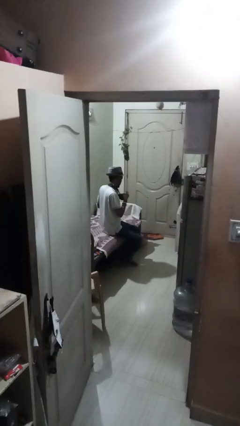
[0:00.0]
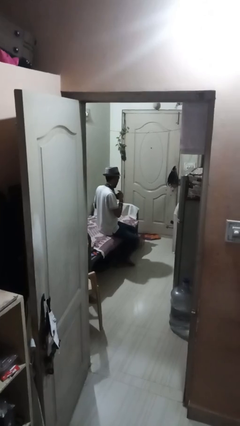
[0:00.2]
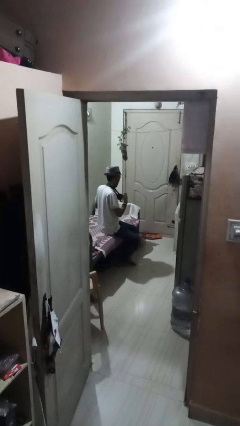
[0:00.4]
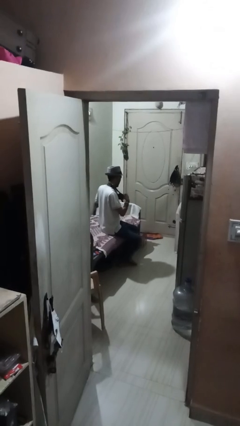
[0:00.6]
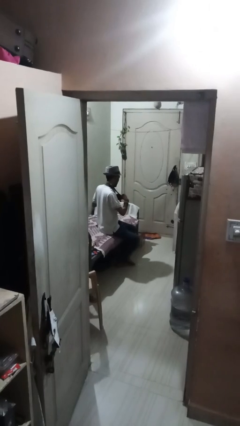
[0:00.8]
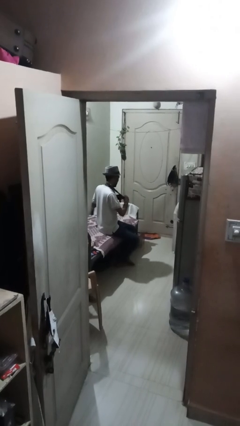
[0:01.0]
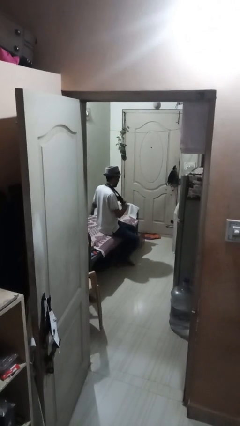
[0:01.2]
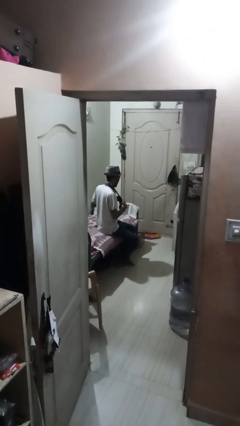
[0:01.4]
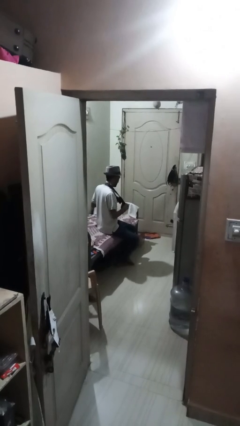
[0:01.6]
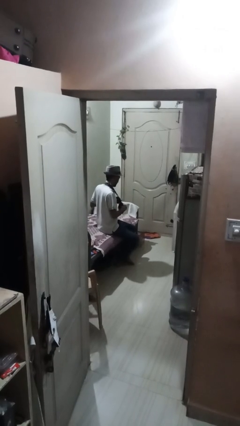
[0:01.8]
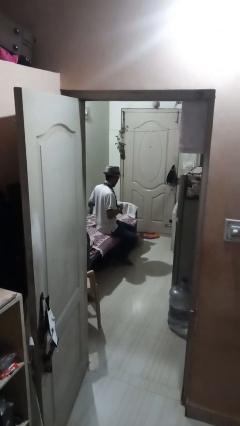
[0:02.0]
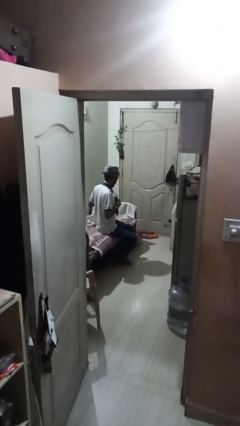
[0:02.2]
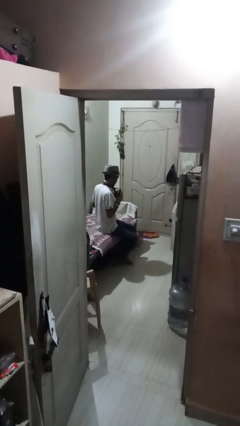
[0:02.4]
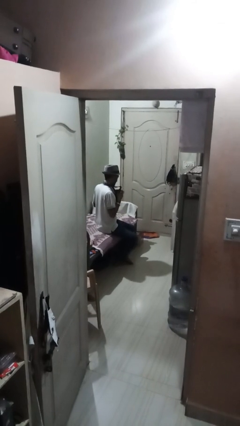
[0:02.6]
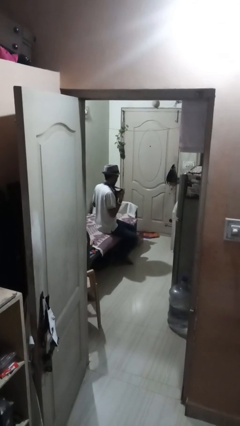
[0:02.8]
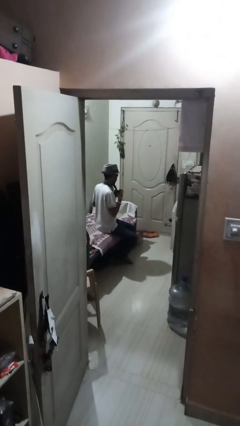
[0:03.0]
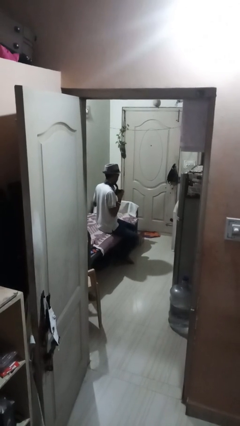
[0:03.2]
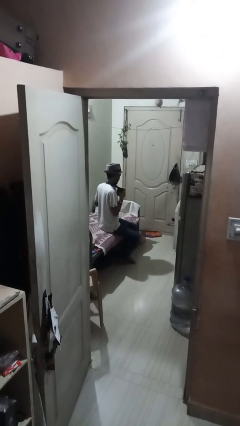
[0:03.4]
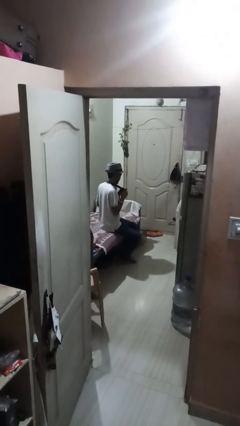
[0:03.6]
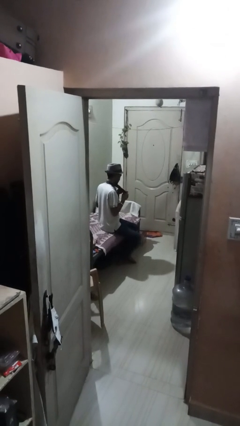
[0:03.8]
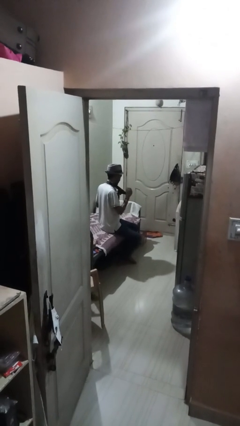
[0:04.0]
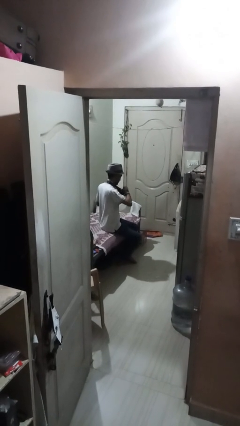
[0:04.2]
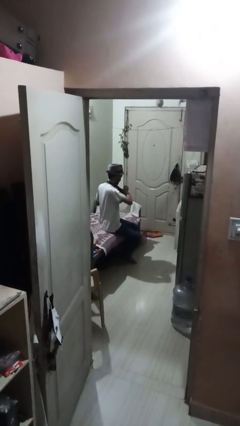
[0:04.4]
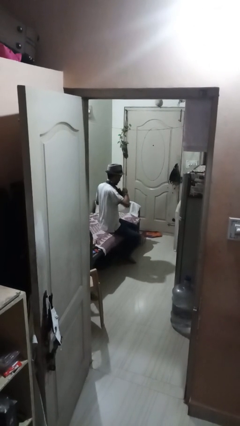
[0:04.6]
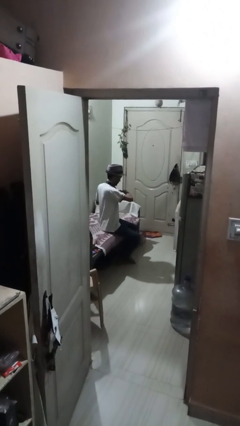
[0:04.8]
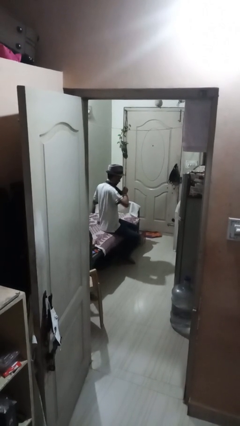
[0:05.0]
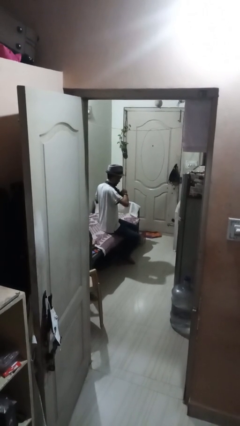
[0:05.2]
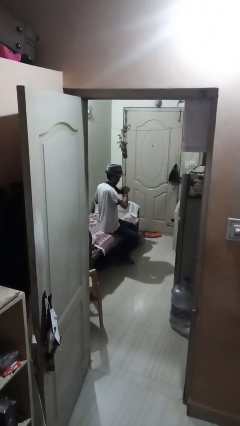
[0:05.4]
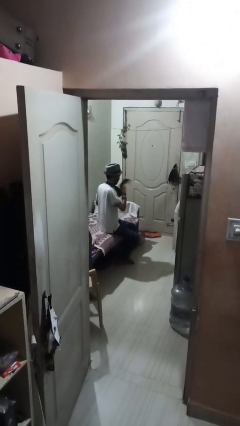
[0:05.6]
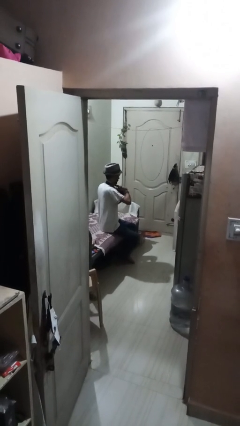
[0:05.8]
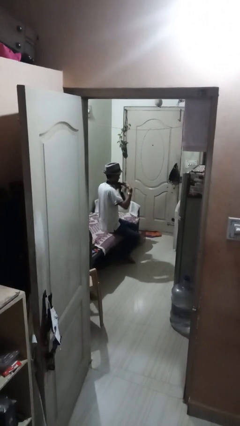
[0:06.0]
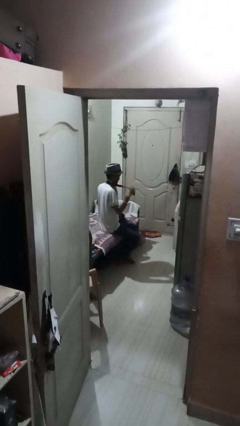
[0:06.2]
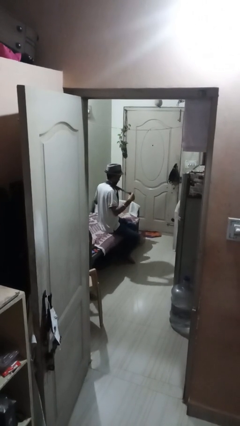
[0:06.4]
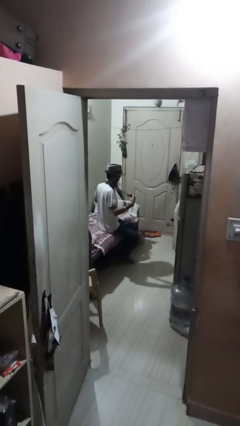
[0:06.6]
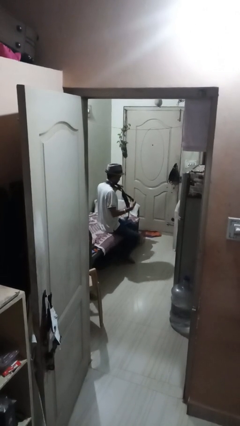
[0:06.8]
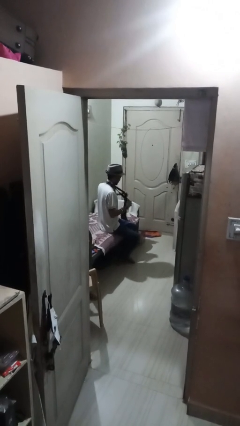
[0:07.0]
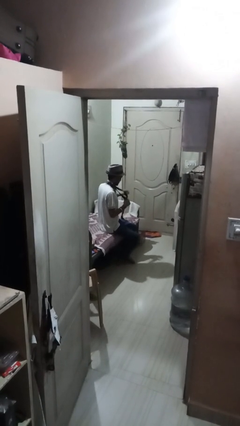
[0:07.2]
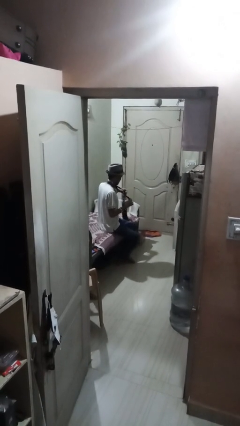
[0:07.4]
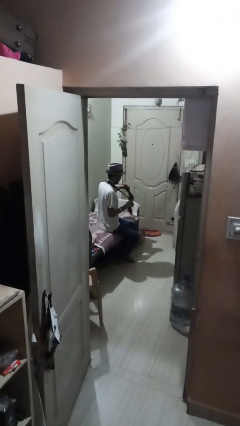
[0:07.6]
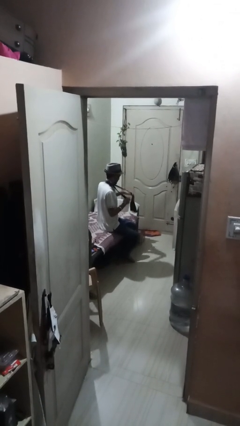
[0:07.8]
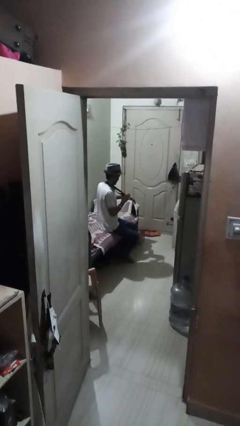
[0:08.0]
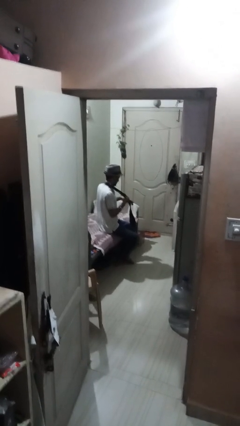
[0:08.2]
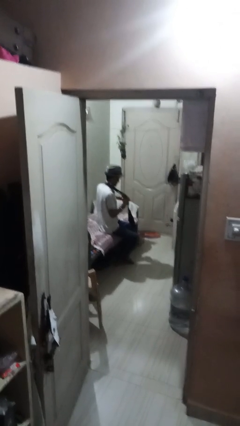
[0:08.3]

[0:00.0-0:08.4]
person takes off necktie

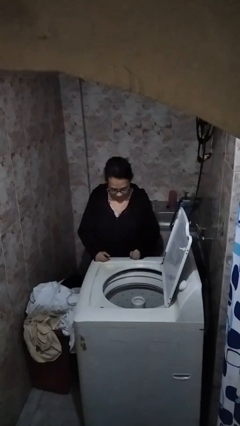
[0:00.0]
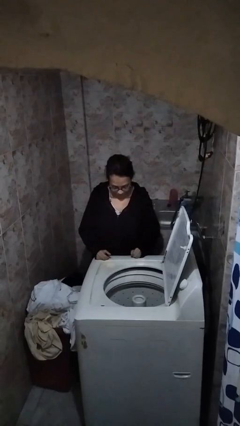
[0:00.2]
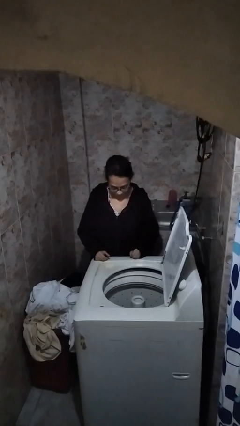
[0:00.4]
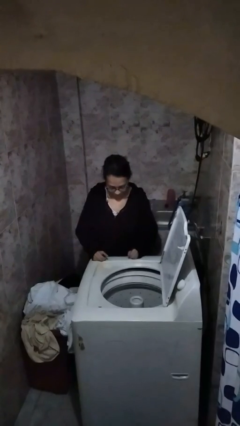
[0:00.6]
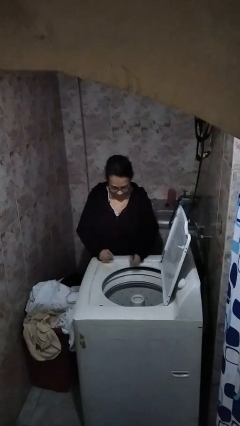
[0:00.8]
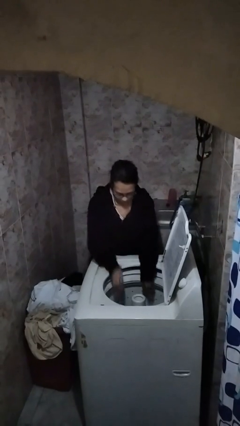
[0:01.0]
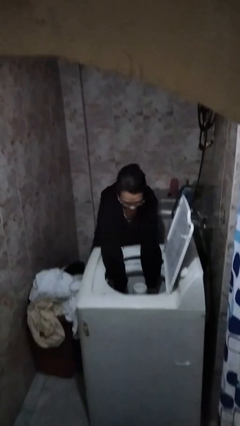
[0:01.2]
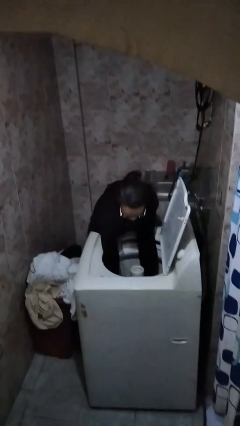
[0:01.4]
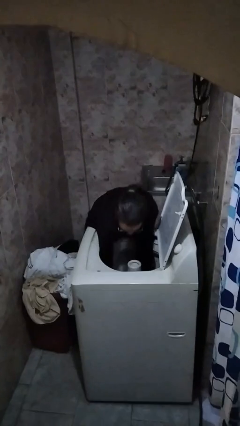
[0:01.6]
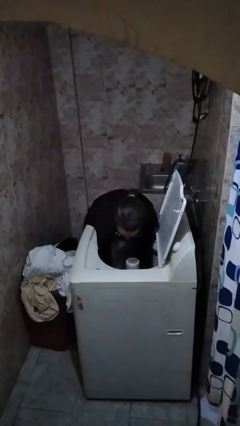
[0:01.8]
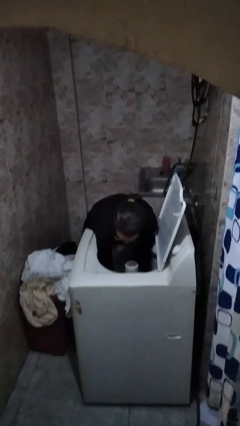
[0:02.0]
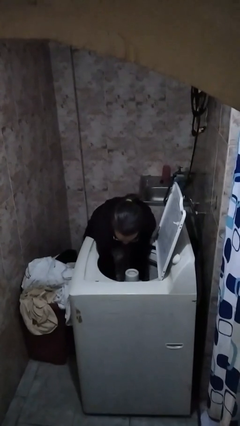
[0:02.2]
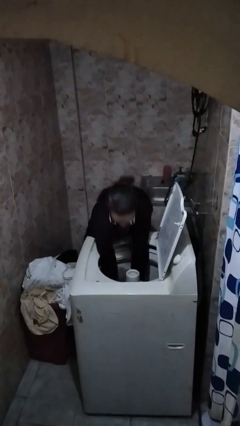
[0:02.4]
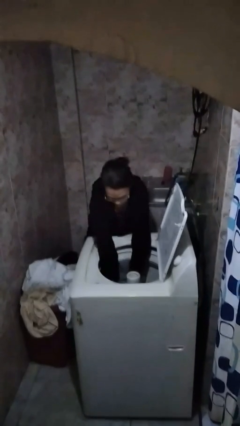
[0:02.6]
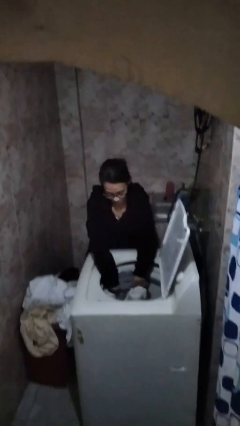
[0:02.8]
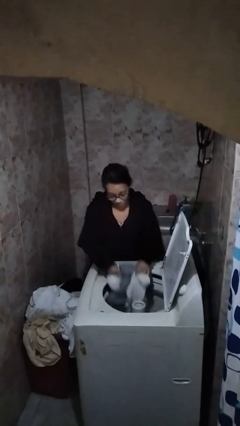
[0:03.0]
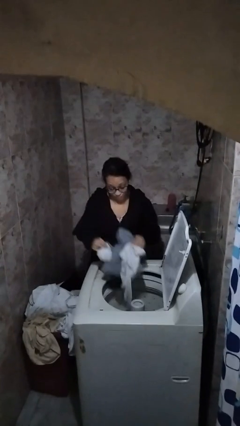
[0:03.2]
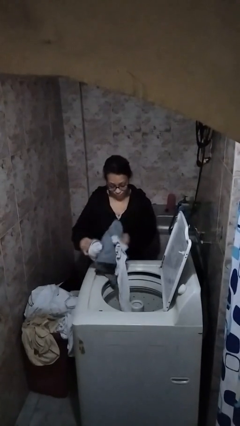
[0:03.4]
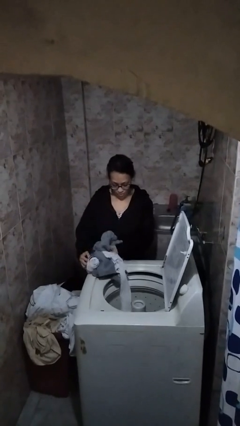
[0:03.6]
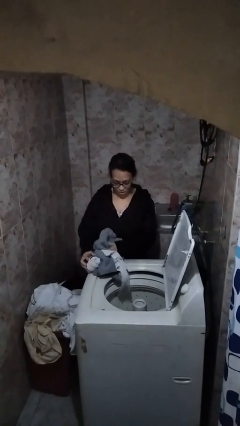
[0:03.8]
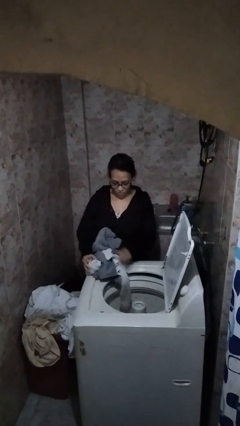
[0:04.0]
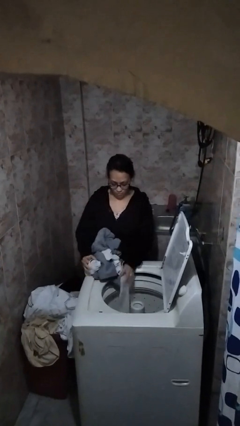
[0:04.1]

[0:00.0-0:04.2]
person unloads dryer

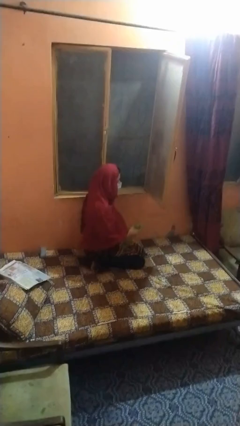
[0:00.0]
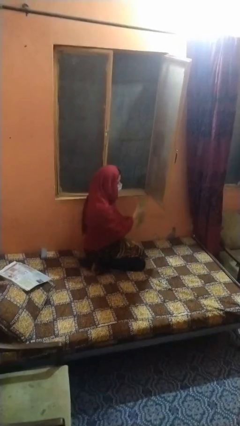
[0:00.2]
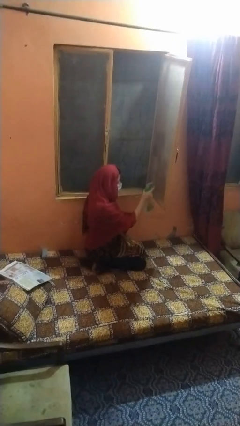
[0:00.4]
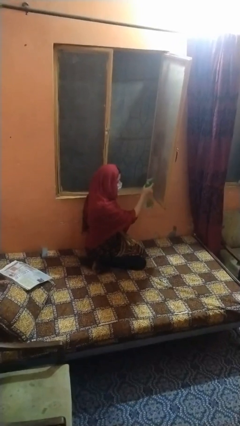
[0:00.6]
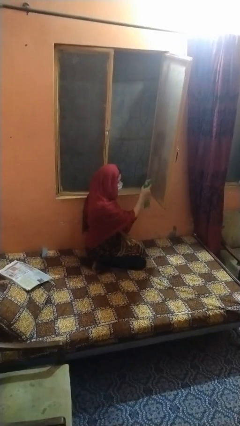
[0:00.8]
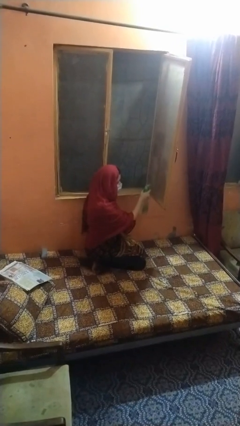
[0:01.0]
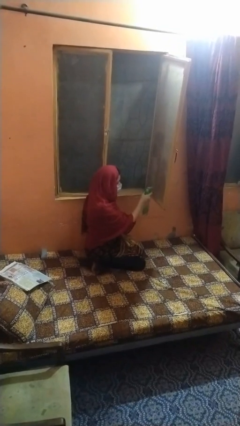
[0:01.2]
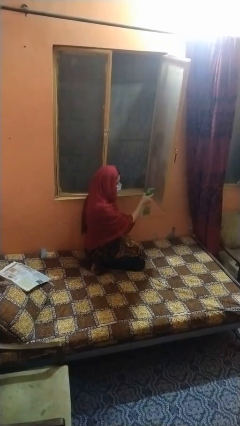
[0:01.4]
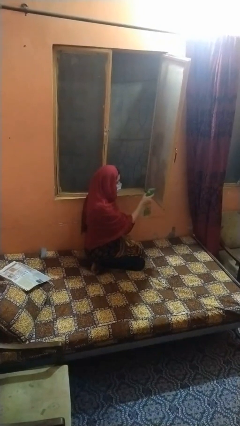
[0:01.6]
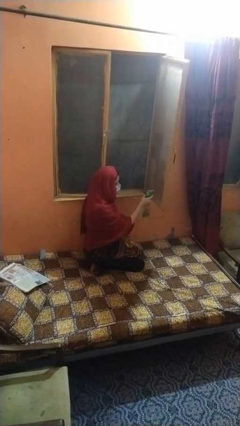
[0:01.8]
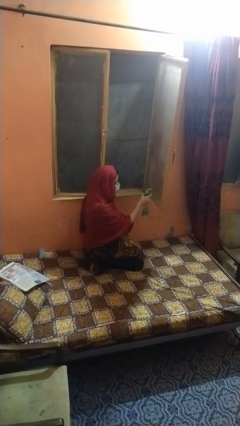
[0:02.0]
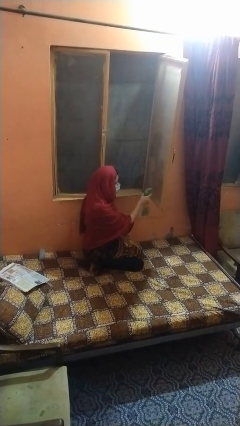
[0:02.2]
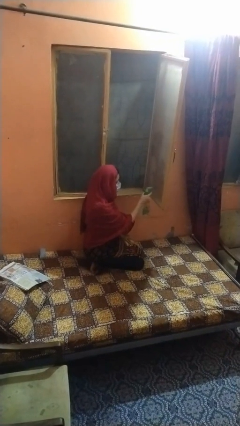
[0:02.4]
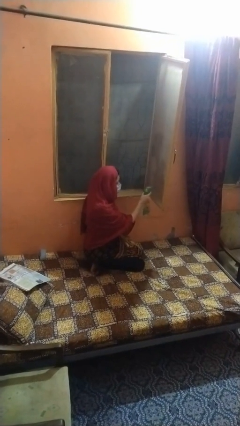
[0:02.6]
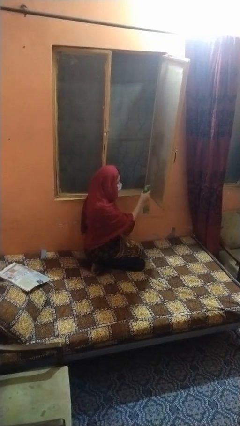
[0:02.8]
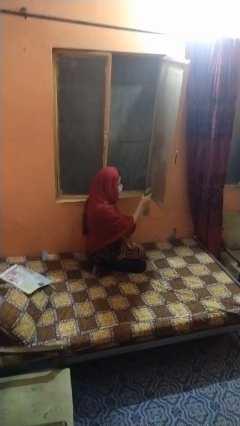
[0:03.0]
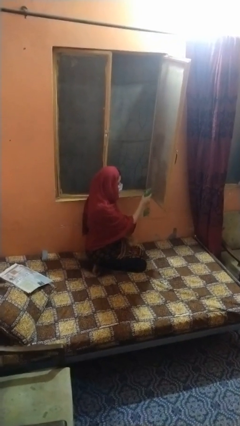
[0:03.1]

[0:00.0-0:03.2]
person sprays from bottle

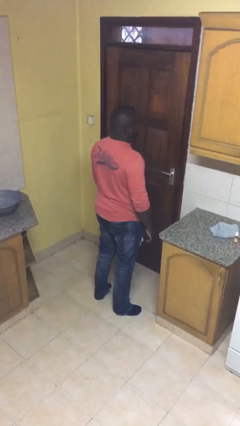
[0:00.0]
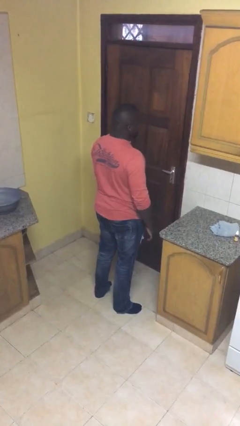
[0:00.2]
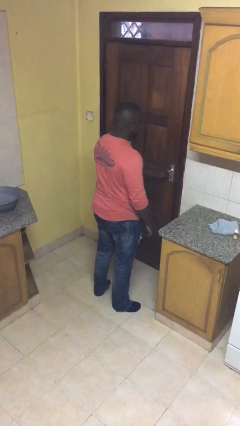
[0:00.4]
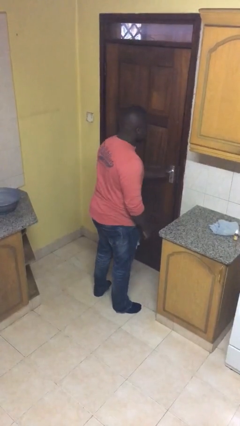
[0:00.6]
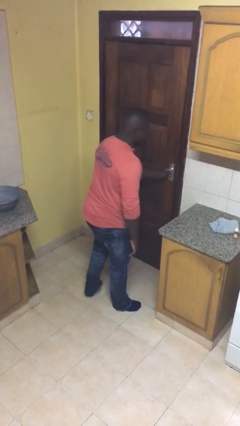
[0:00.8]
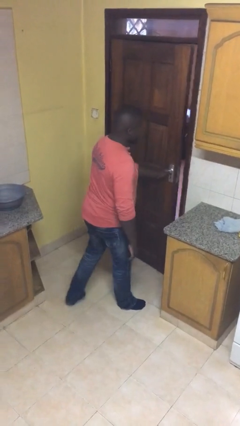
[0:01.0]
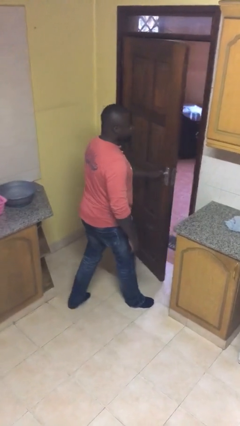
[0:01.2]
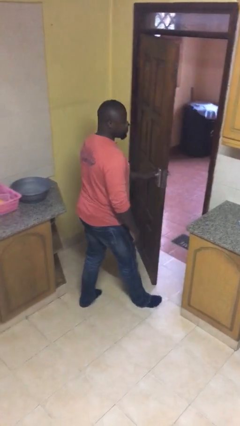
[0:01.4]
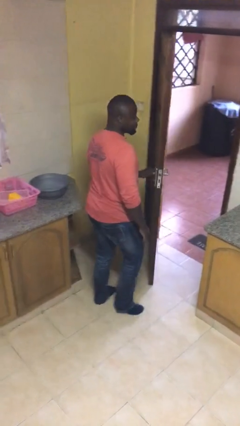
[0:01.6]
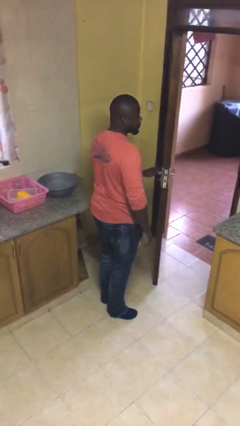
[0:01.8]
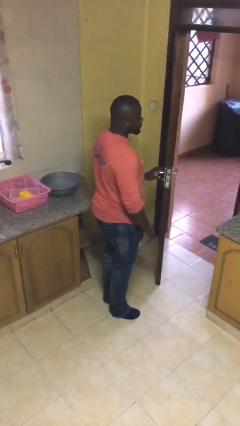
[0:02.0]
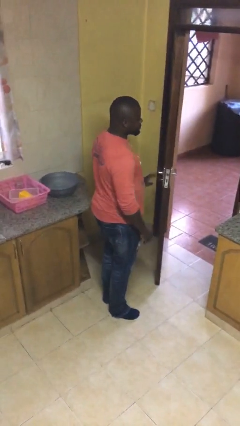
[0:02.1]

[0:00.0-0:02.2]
person opens facility door
